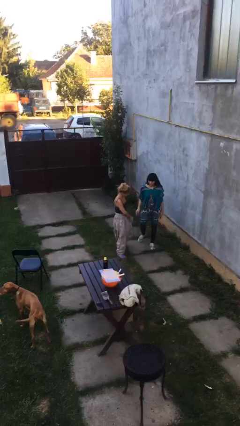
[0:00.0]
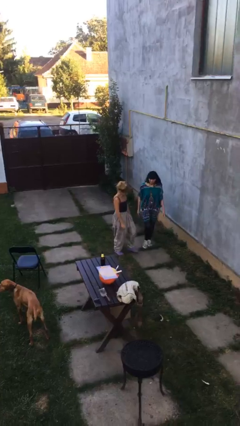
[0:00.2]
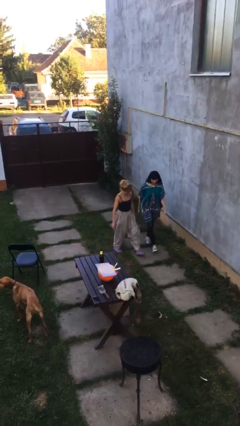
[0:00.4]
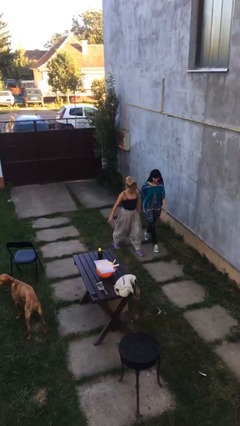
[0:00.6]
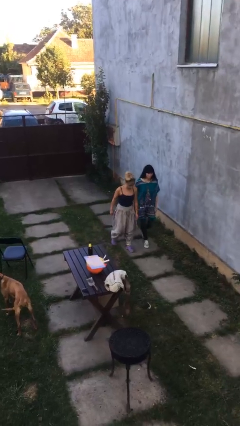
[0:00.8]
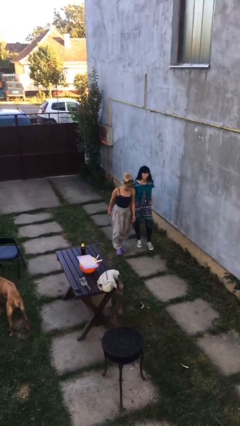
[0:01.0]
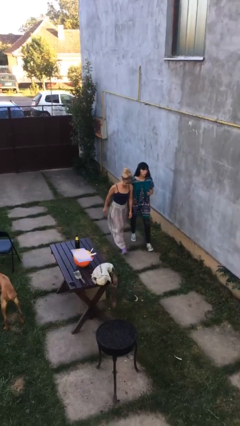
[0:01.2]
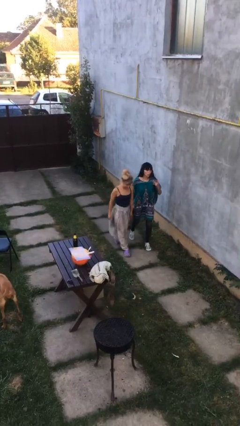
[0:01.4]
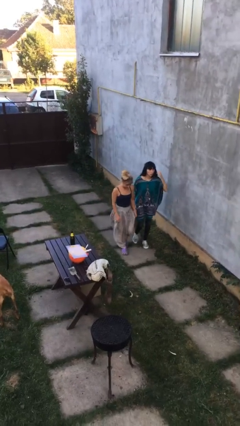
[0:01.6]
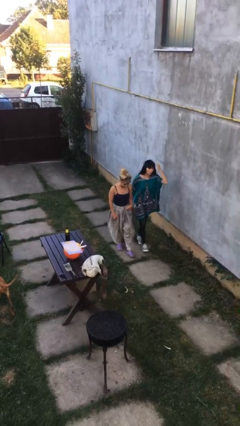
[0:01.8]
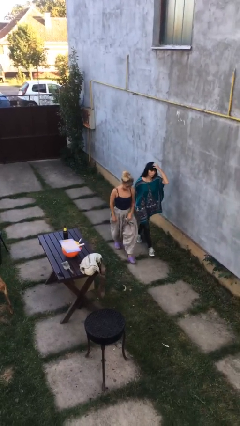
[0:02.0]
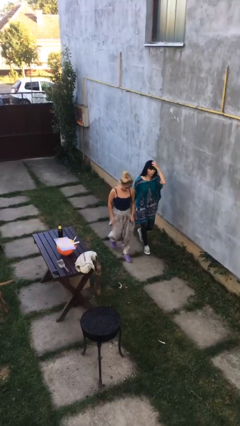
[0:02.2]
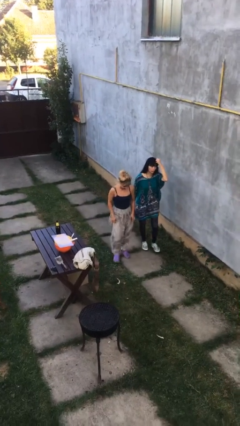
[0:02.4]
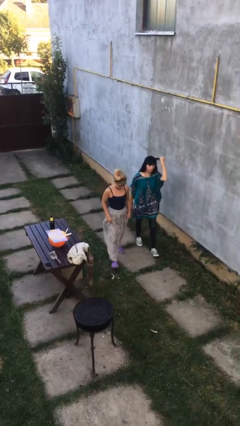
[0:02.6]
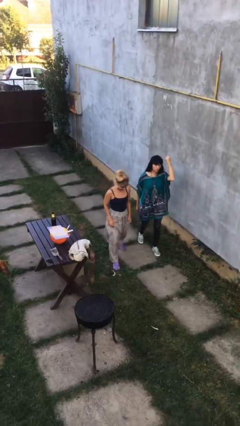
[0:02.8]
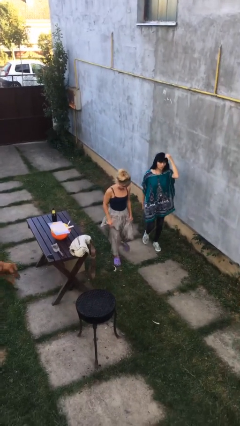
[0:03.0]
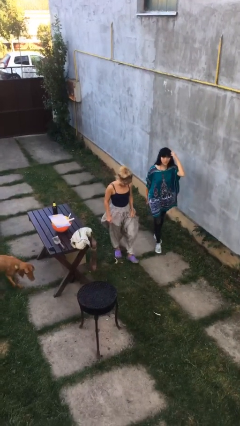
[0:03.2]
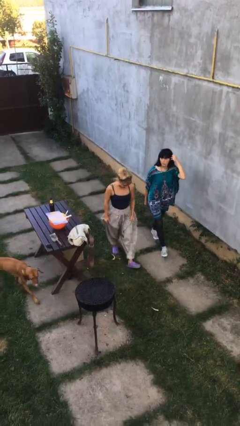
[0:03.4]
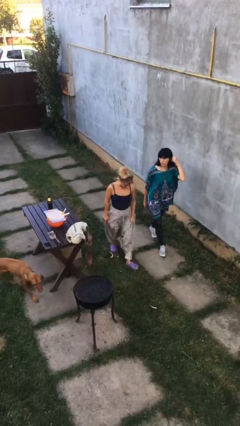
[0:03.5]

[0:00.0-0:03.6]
person talks to person

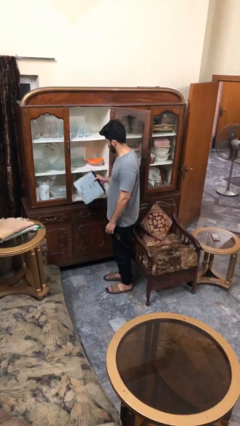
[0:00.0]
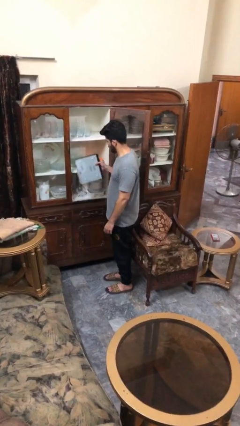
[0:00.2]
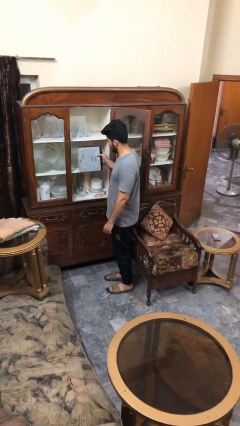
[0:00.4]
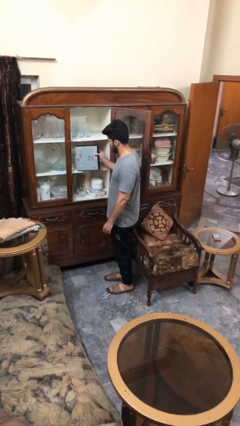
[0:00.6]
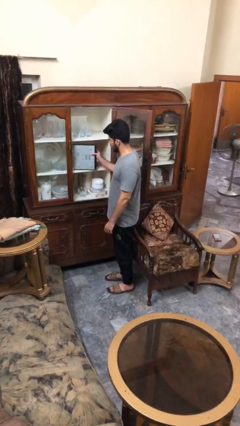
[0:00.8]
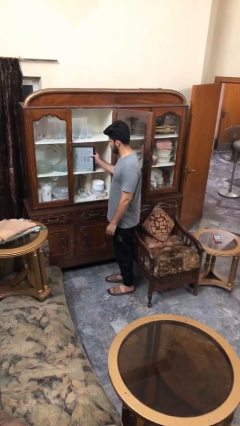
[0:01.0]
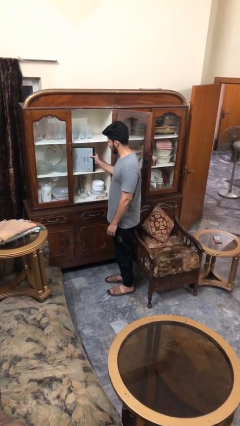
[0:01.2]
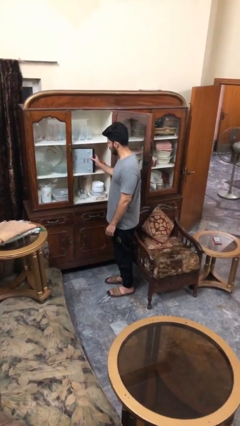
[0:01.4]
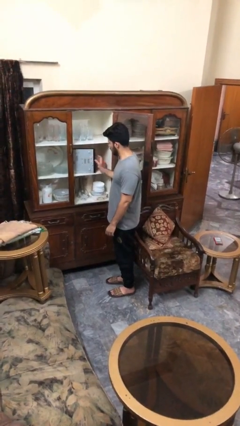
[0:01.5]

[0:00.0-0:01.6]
person puts down object into cabinet

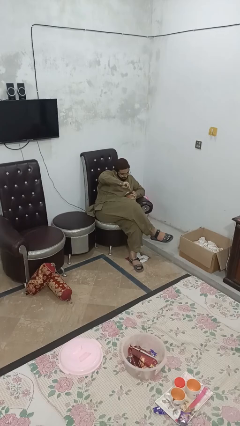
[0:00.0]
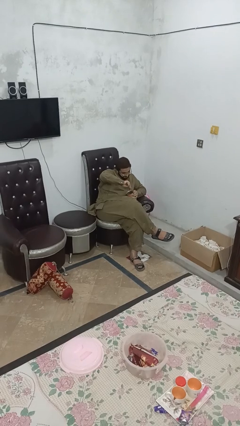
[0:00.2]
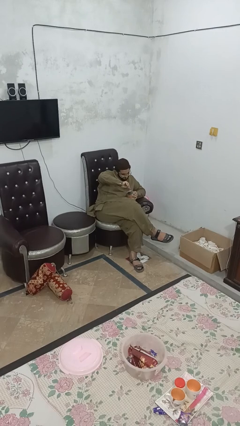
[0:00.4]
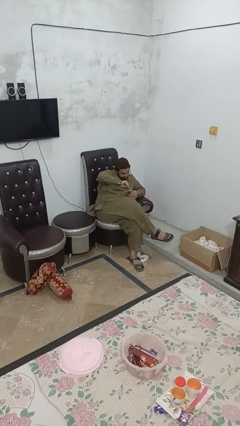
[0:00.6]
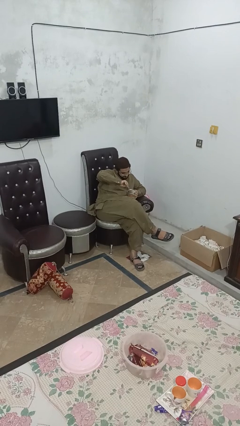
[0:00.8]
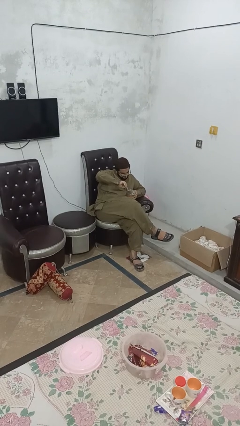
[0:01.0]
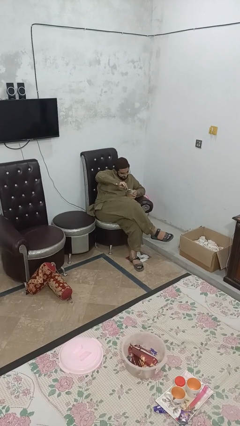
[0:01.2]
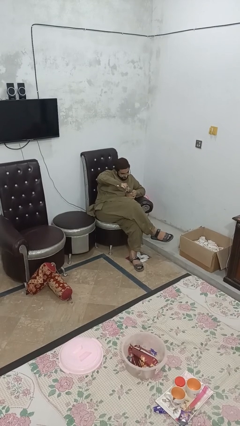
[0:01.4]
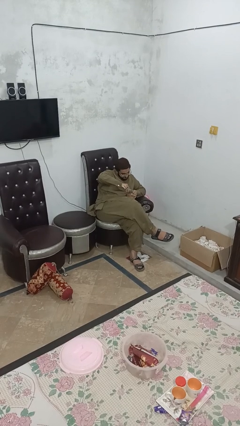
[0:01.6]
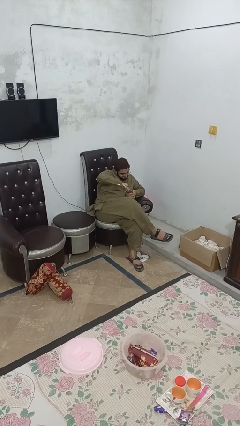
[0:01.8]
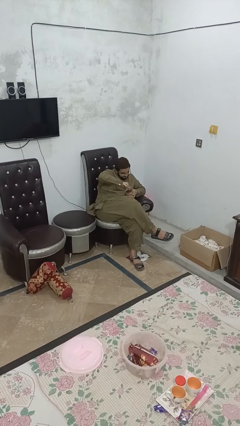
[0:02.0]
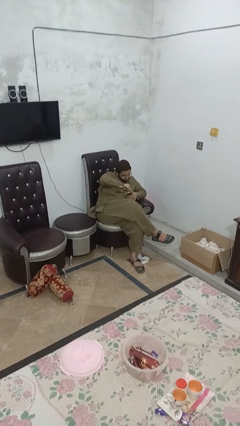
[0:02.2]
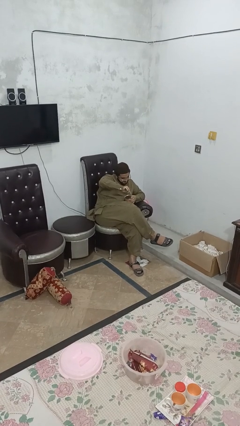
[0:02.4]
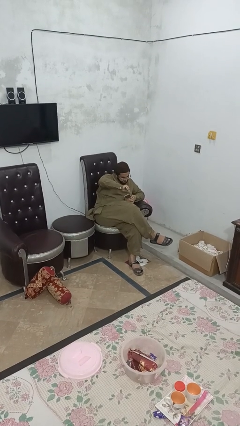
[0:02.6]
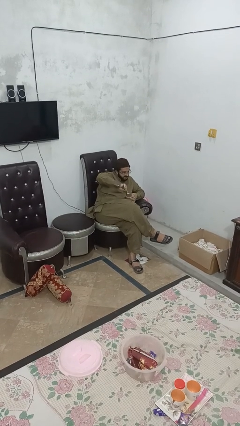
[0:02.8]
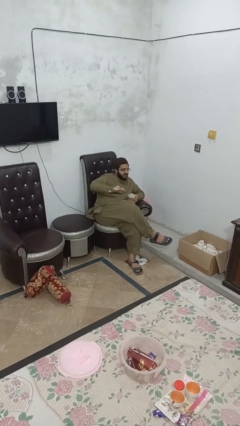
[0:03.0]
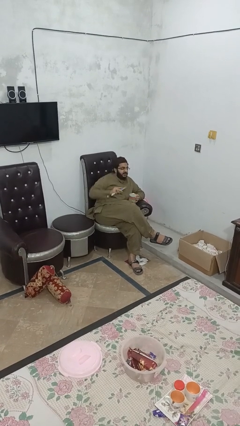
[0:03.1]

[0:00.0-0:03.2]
person opens can with can opener

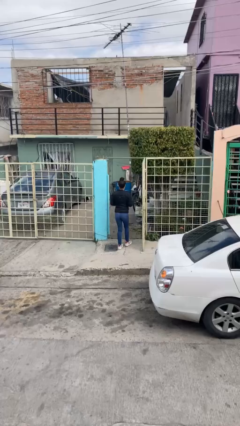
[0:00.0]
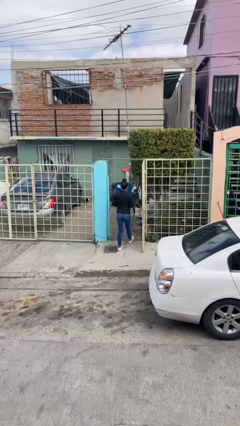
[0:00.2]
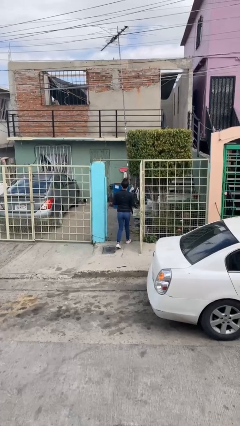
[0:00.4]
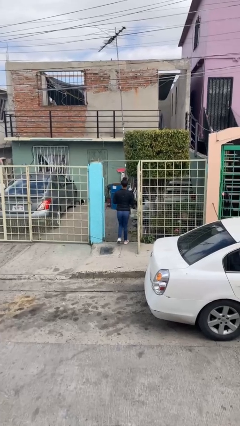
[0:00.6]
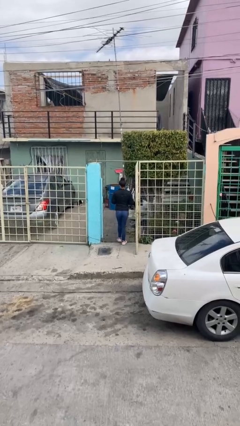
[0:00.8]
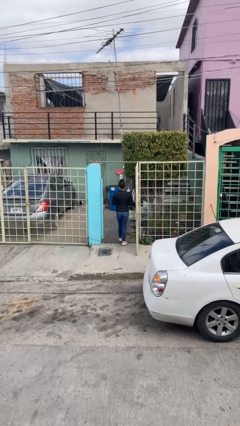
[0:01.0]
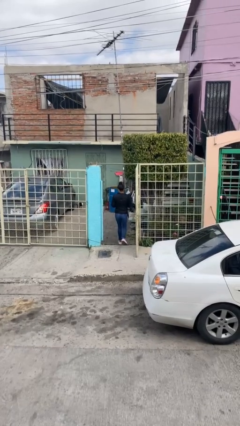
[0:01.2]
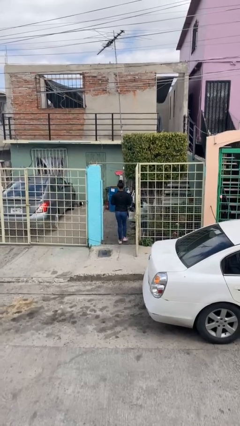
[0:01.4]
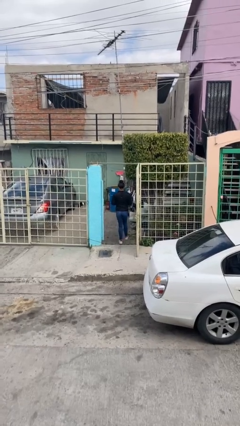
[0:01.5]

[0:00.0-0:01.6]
person exits scene through structure

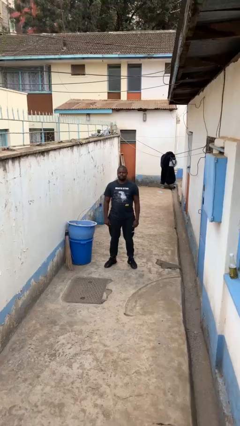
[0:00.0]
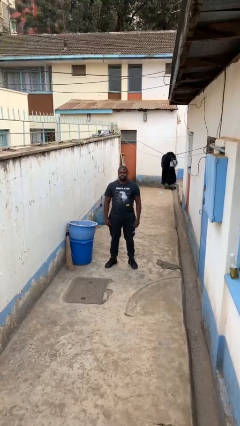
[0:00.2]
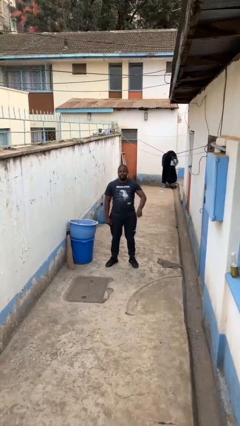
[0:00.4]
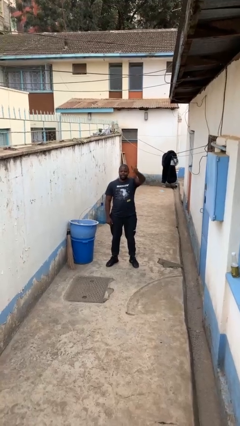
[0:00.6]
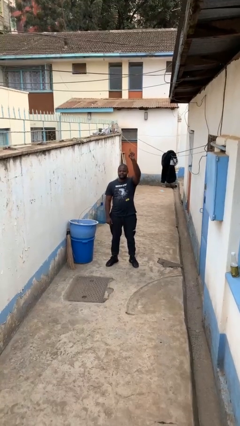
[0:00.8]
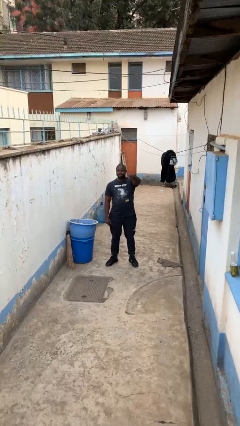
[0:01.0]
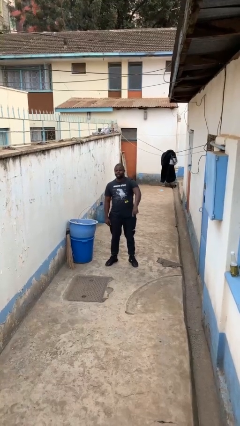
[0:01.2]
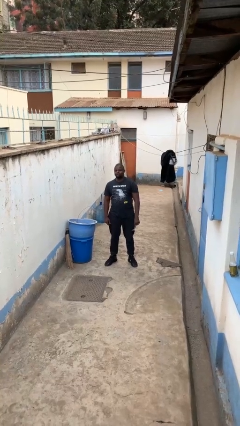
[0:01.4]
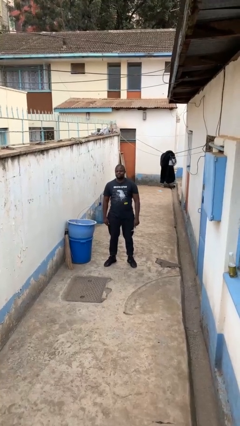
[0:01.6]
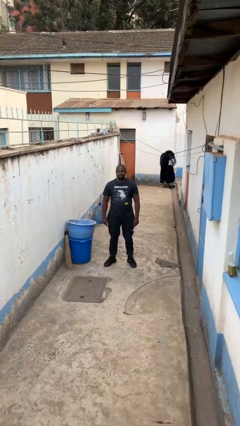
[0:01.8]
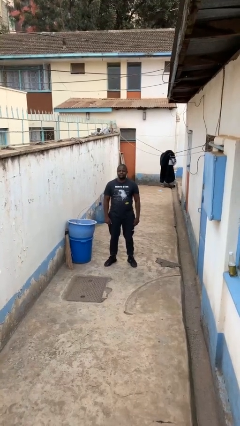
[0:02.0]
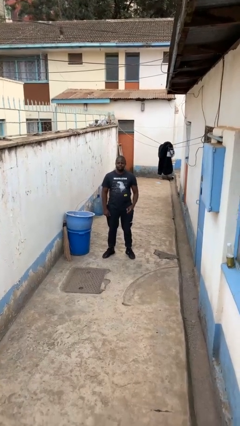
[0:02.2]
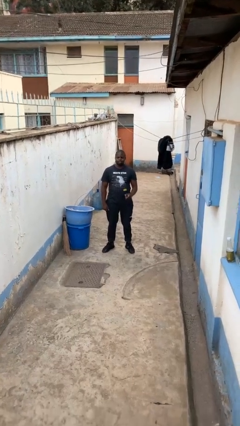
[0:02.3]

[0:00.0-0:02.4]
person gestures swipe down

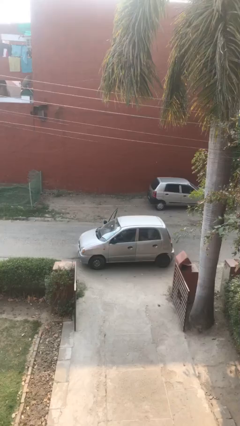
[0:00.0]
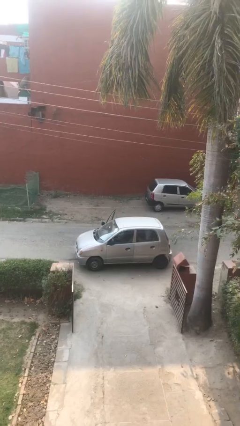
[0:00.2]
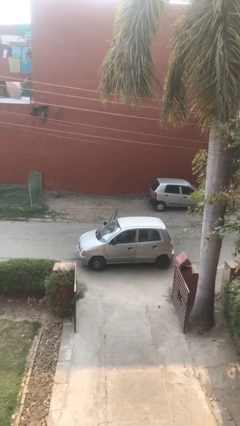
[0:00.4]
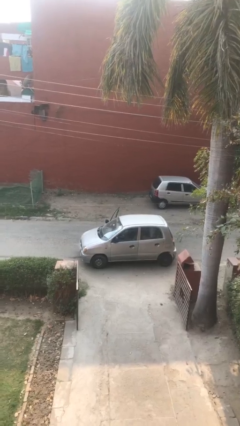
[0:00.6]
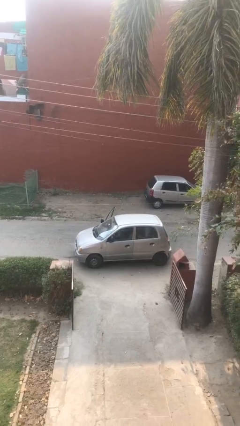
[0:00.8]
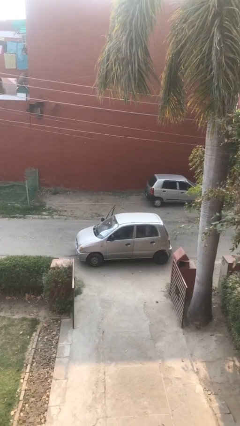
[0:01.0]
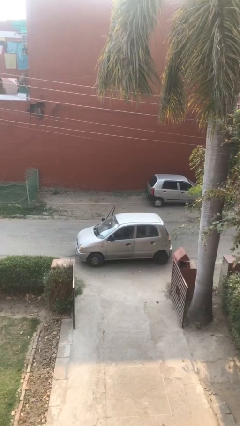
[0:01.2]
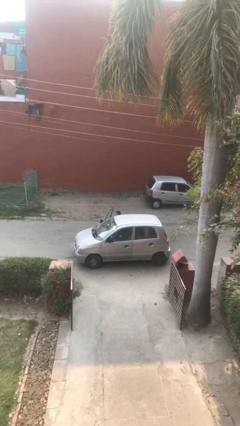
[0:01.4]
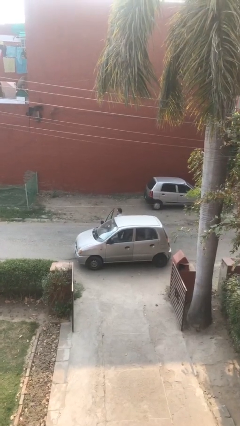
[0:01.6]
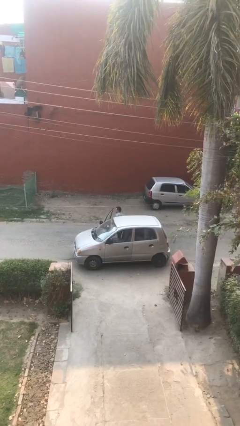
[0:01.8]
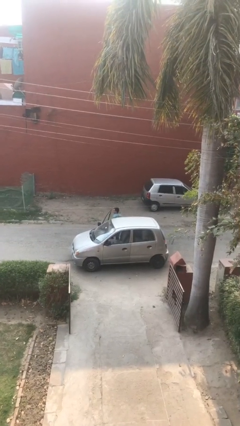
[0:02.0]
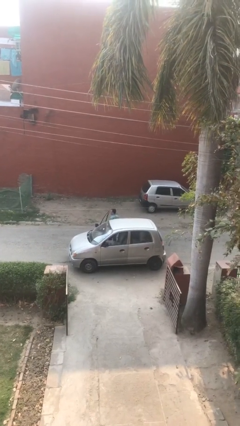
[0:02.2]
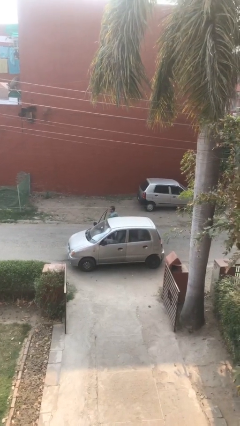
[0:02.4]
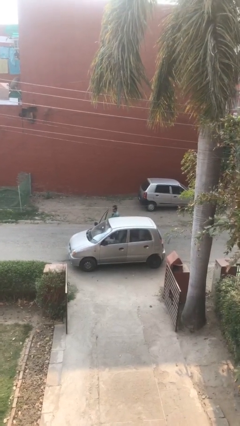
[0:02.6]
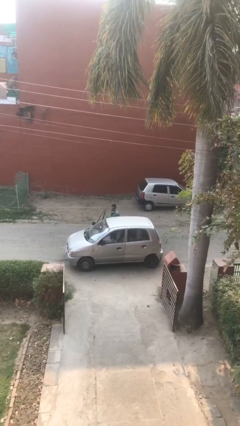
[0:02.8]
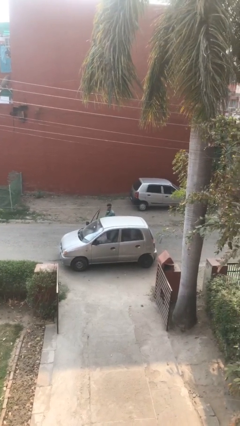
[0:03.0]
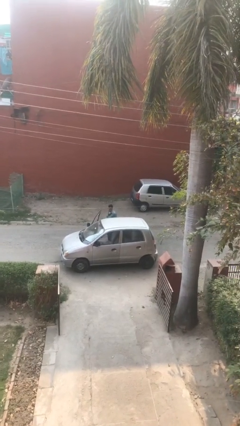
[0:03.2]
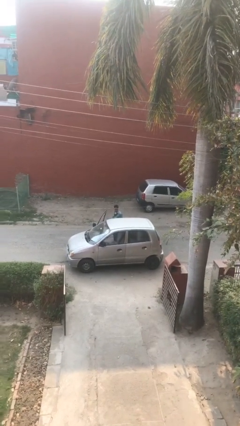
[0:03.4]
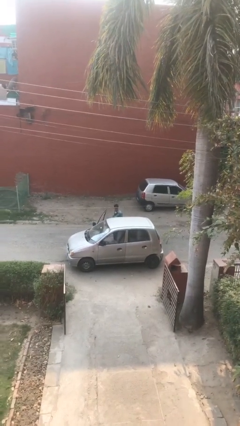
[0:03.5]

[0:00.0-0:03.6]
person exits car

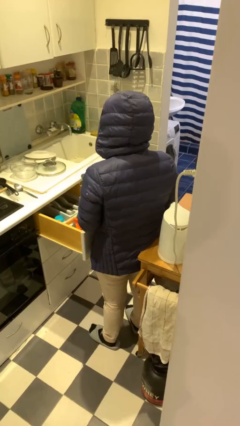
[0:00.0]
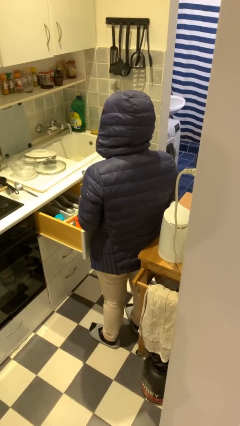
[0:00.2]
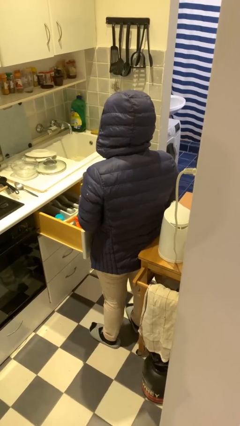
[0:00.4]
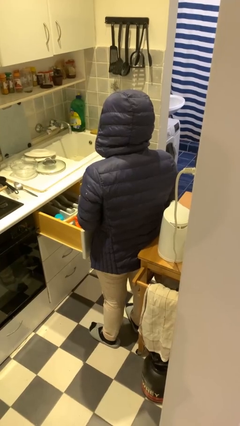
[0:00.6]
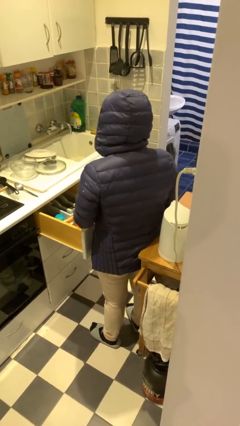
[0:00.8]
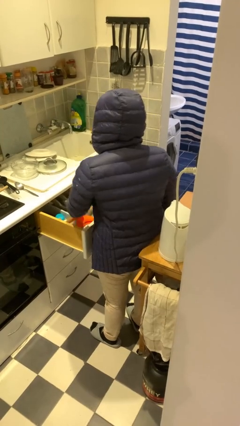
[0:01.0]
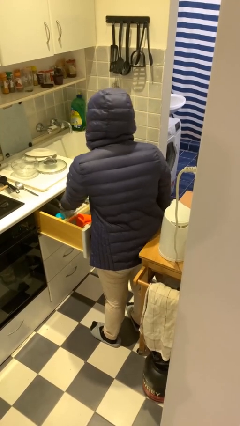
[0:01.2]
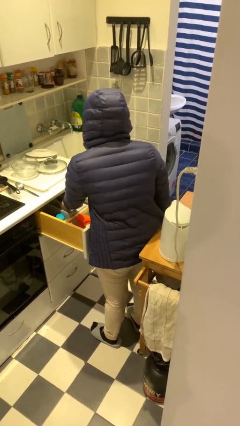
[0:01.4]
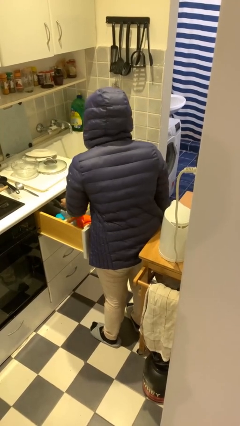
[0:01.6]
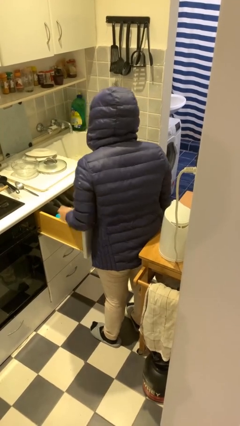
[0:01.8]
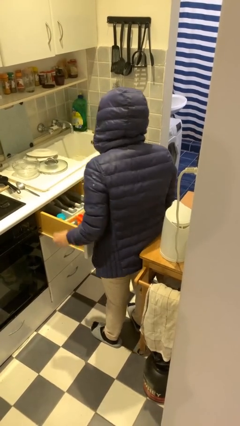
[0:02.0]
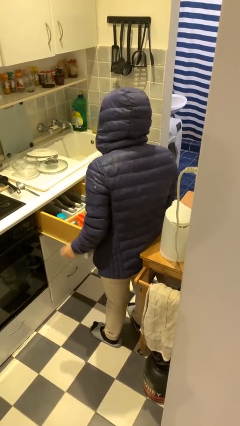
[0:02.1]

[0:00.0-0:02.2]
person puts object into kitchen drawer
